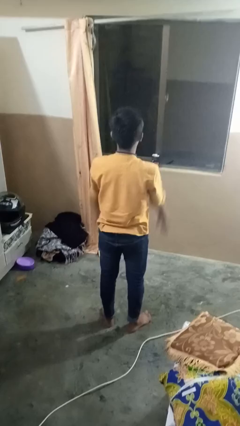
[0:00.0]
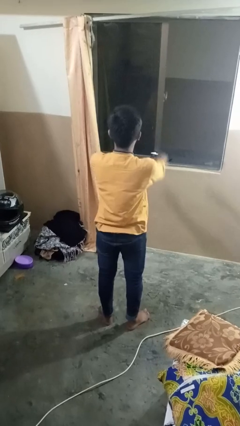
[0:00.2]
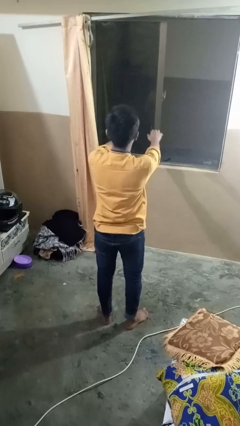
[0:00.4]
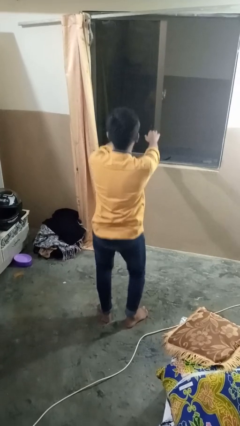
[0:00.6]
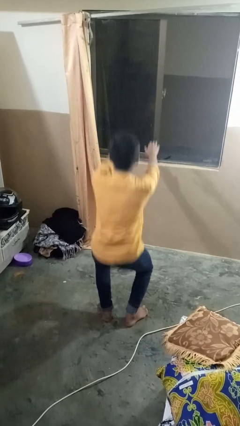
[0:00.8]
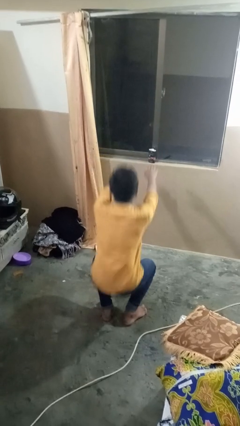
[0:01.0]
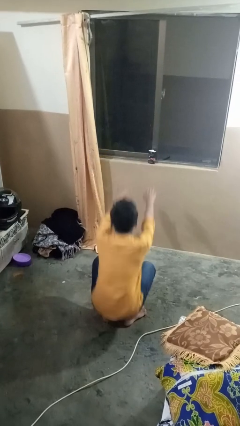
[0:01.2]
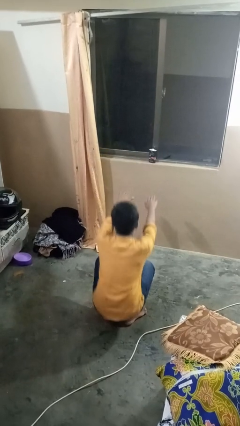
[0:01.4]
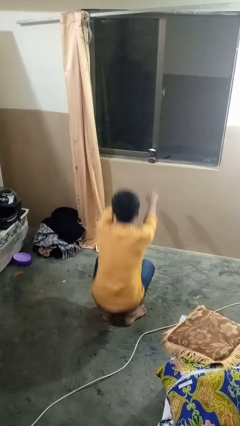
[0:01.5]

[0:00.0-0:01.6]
person squats

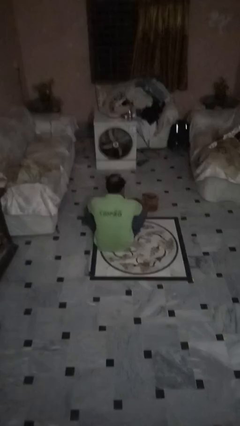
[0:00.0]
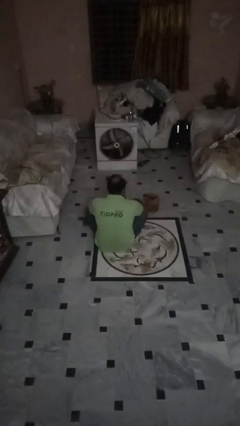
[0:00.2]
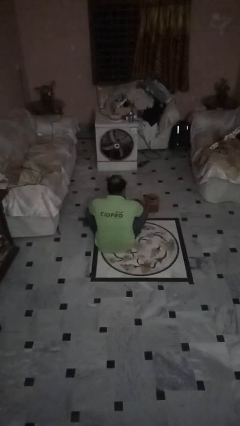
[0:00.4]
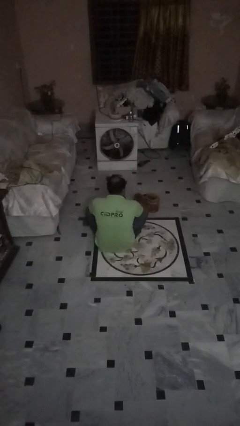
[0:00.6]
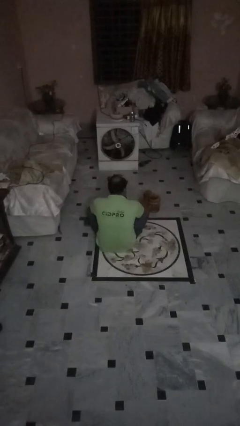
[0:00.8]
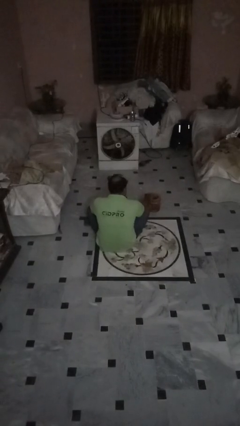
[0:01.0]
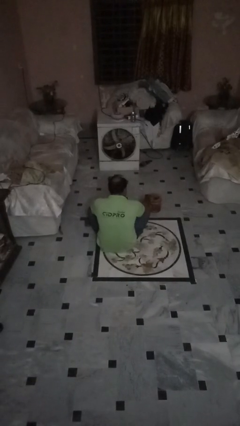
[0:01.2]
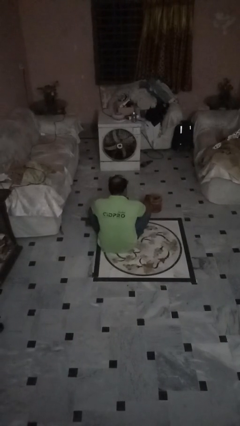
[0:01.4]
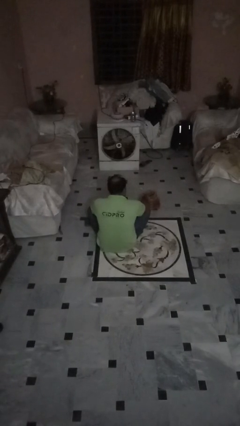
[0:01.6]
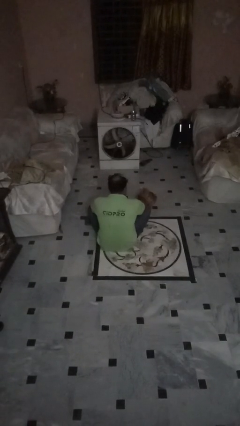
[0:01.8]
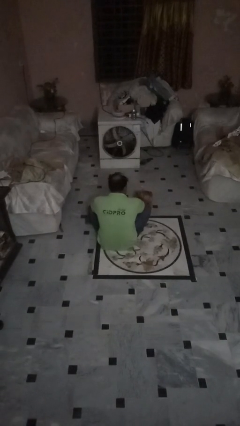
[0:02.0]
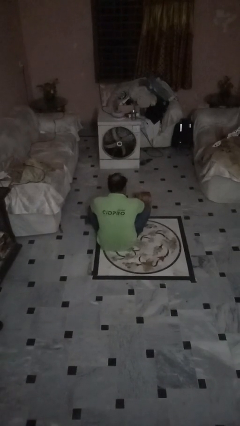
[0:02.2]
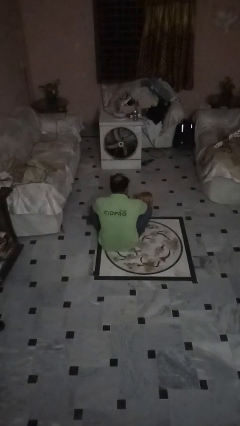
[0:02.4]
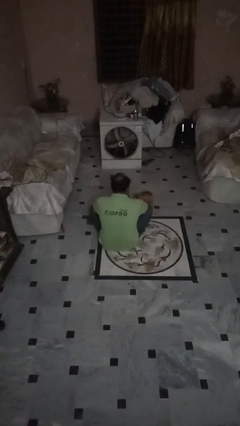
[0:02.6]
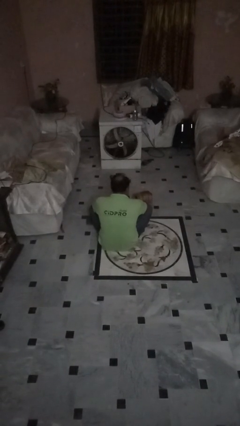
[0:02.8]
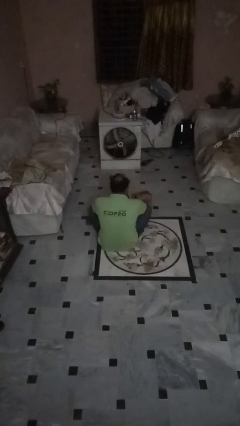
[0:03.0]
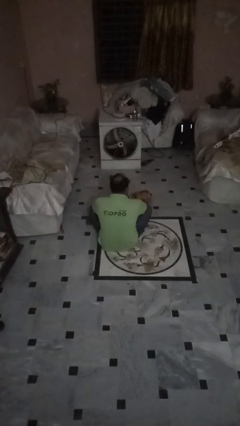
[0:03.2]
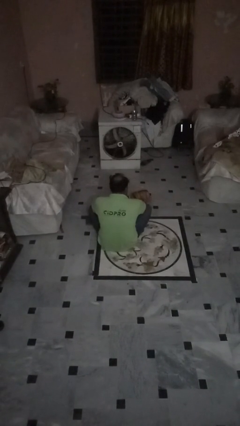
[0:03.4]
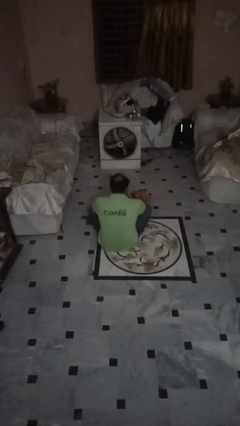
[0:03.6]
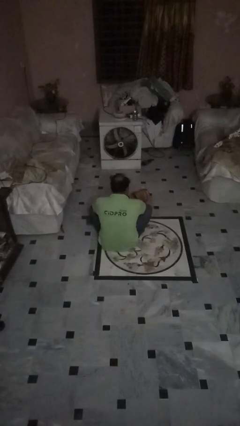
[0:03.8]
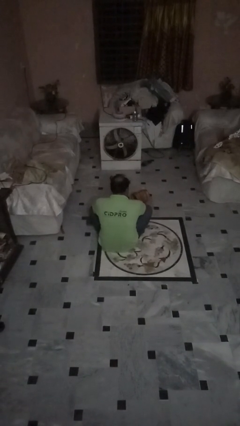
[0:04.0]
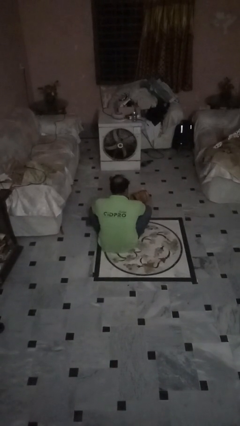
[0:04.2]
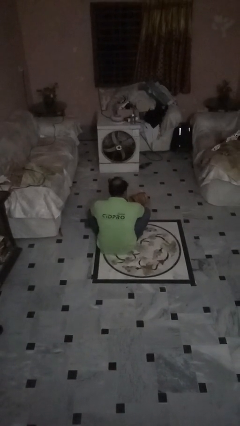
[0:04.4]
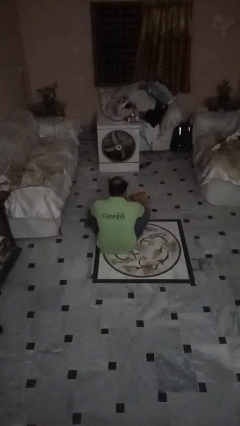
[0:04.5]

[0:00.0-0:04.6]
person knocks over furniture

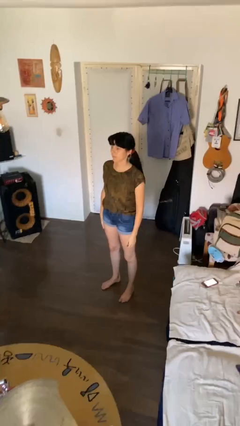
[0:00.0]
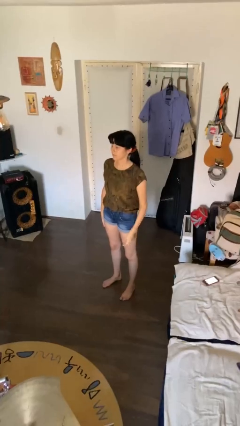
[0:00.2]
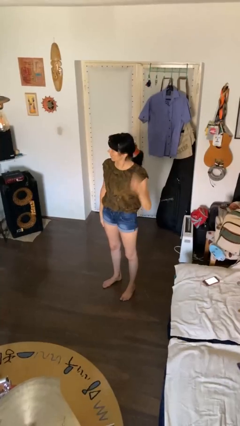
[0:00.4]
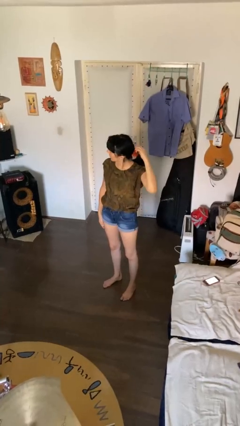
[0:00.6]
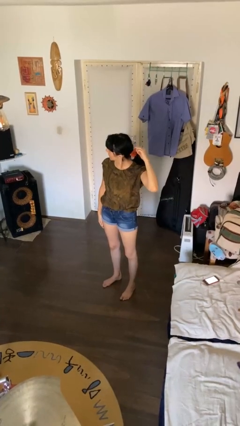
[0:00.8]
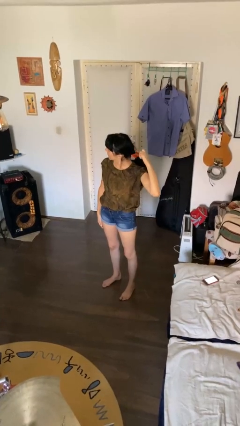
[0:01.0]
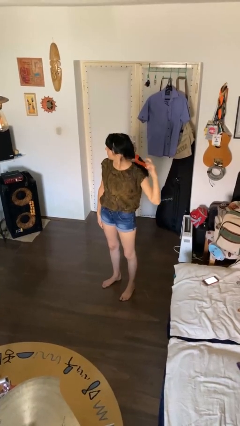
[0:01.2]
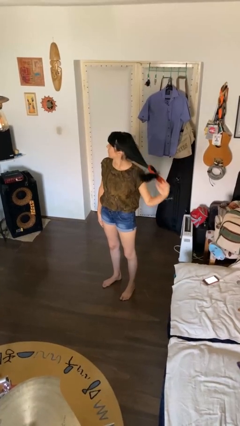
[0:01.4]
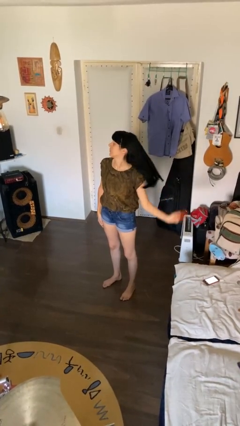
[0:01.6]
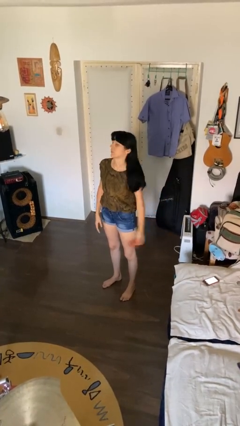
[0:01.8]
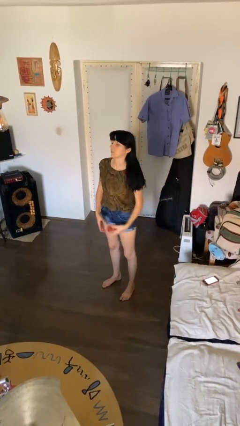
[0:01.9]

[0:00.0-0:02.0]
person takes off hairtie

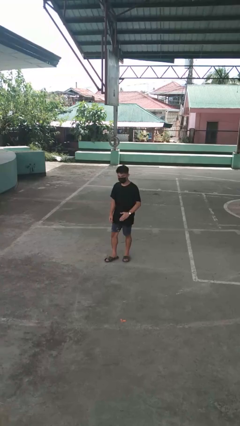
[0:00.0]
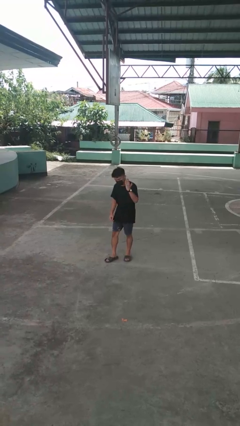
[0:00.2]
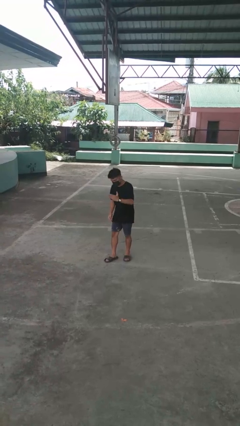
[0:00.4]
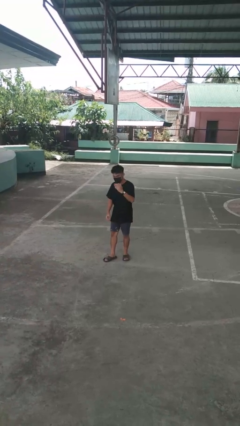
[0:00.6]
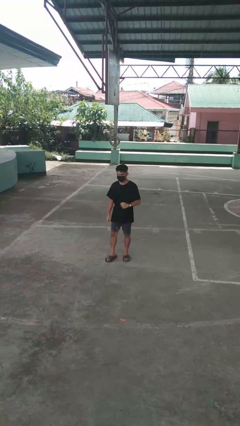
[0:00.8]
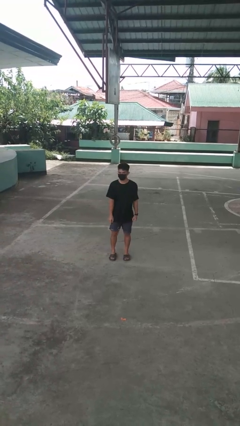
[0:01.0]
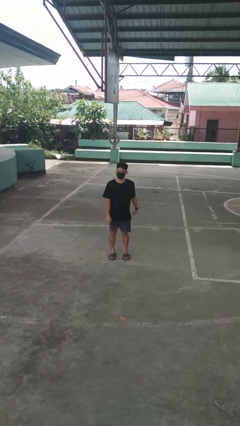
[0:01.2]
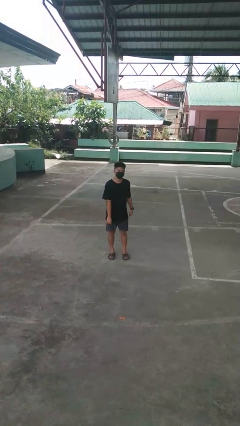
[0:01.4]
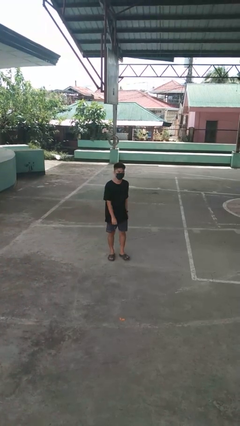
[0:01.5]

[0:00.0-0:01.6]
person karate chop

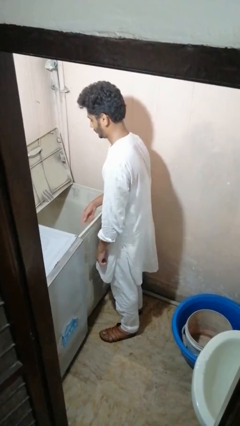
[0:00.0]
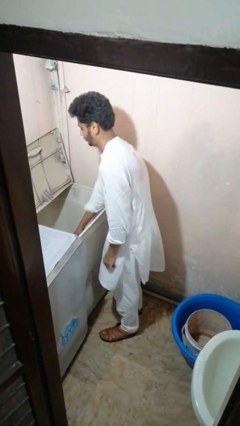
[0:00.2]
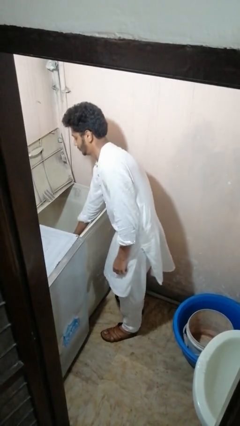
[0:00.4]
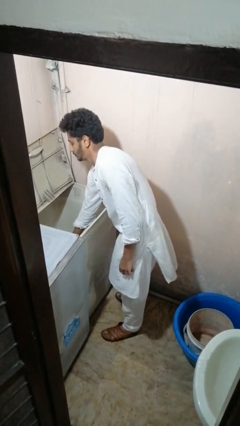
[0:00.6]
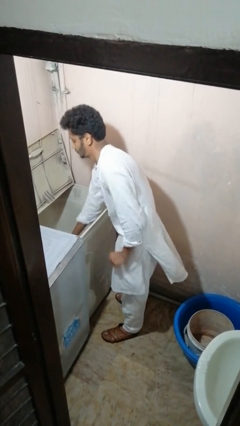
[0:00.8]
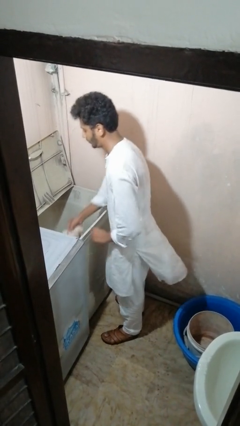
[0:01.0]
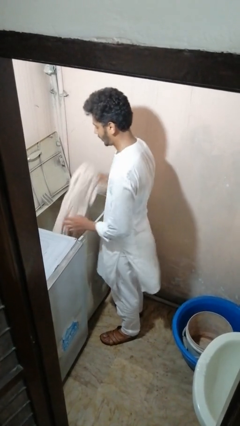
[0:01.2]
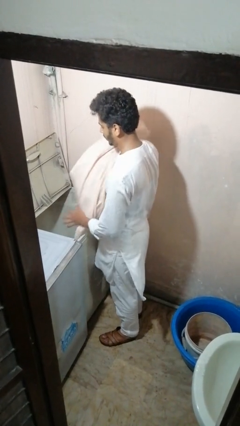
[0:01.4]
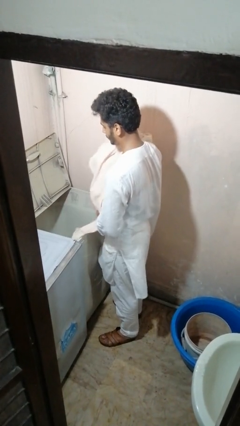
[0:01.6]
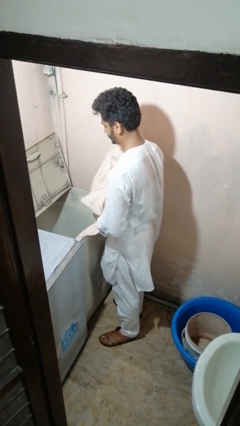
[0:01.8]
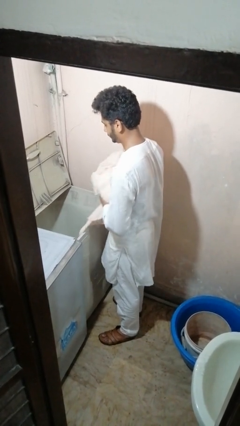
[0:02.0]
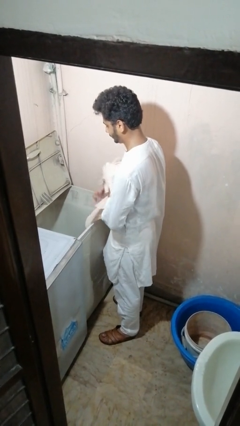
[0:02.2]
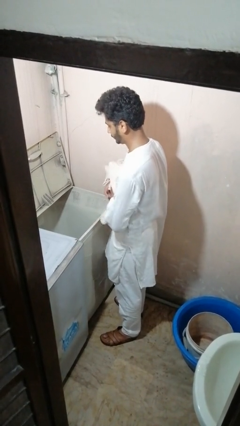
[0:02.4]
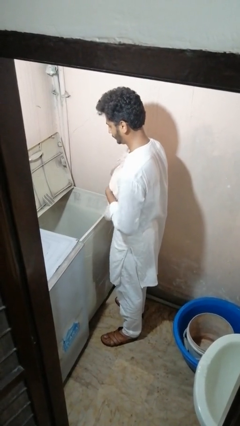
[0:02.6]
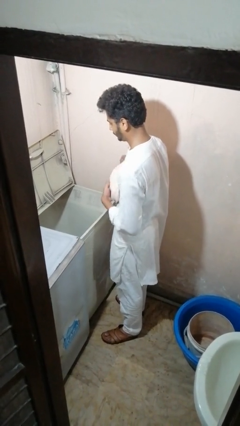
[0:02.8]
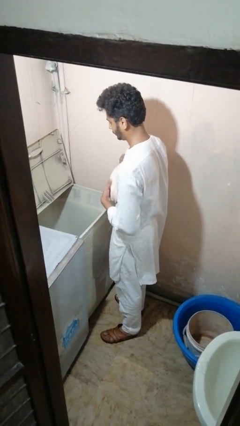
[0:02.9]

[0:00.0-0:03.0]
person unloads clotheswasher

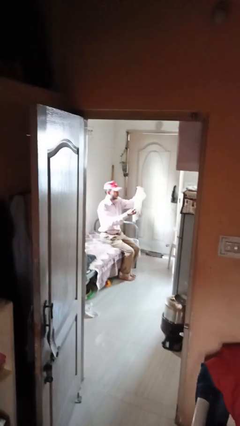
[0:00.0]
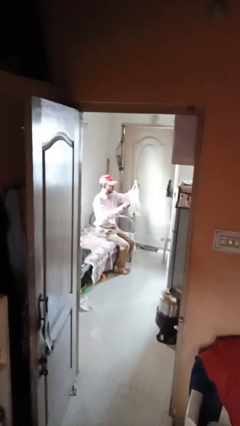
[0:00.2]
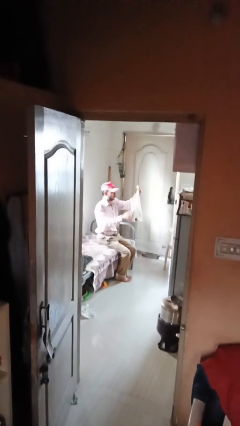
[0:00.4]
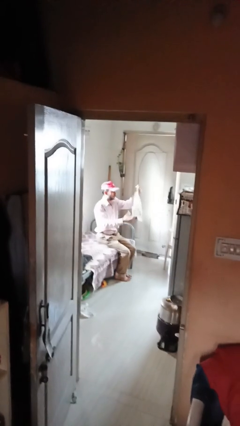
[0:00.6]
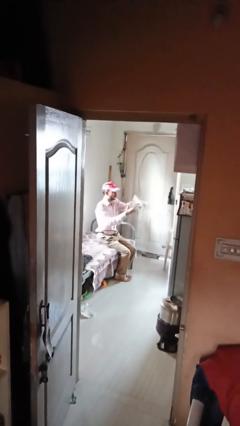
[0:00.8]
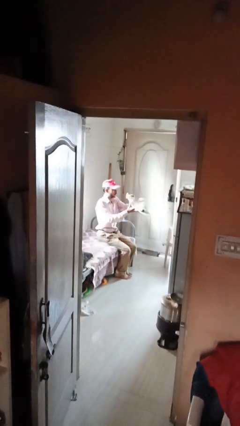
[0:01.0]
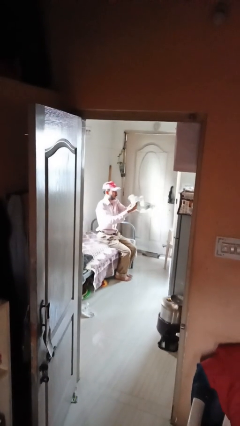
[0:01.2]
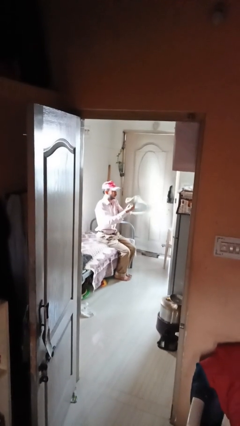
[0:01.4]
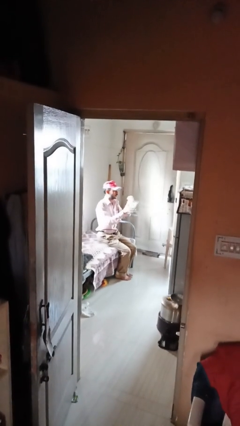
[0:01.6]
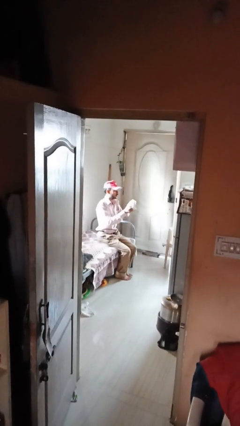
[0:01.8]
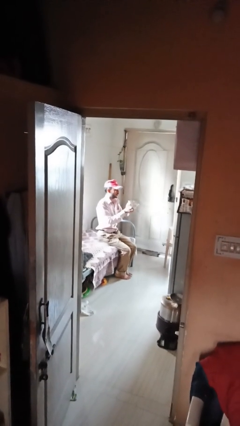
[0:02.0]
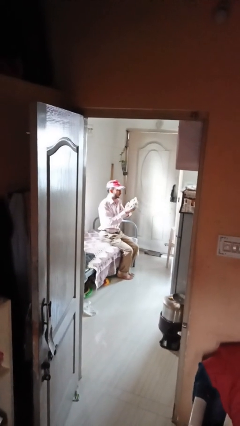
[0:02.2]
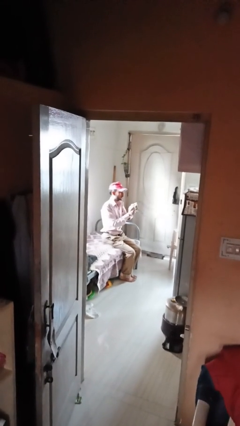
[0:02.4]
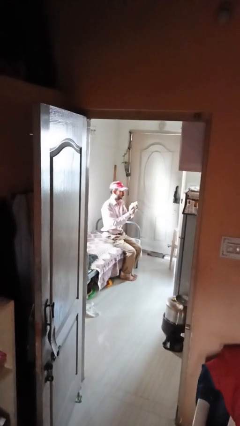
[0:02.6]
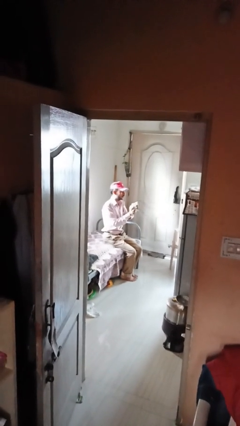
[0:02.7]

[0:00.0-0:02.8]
person crumples paper

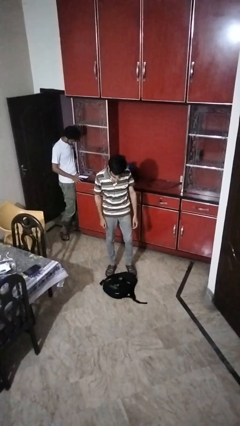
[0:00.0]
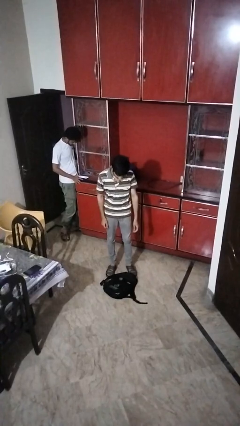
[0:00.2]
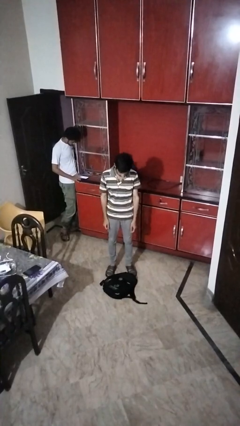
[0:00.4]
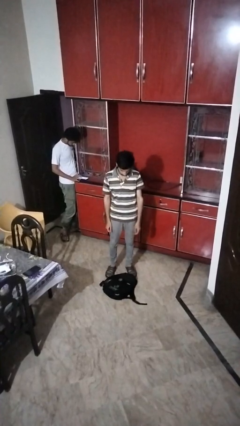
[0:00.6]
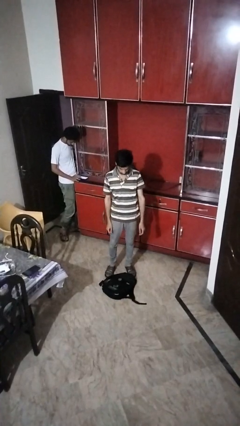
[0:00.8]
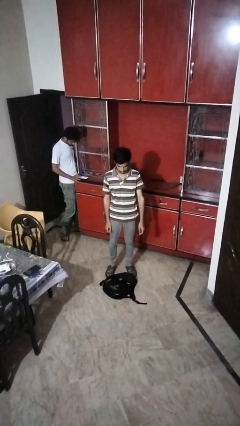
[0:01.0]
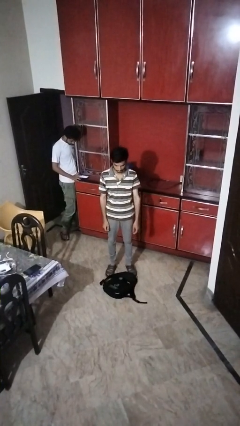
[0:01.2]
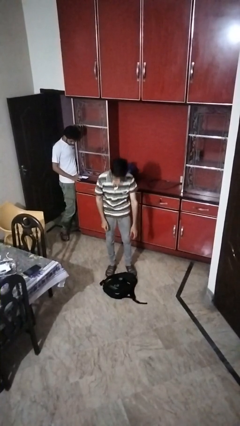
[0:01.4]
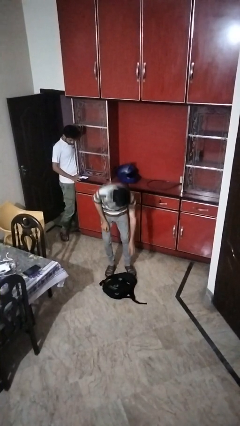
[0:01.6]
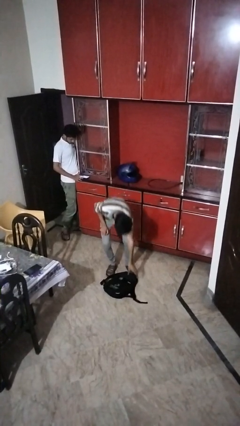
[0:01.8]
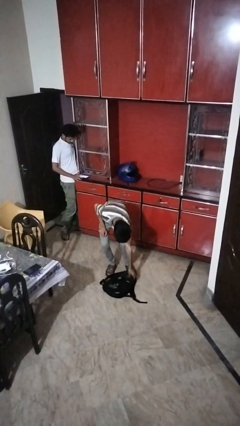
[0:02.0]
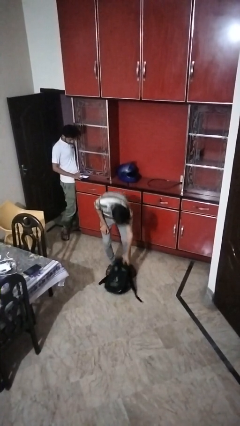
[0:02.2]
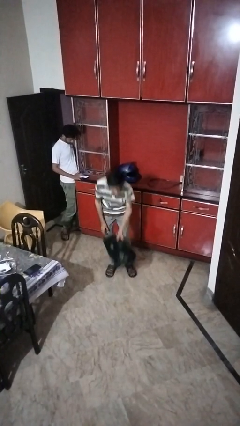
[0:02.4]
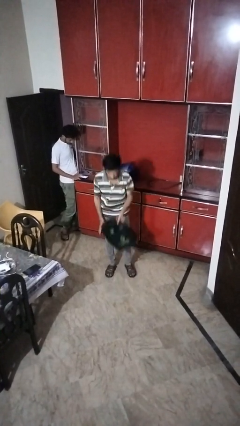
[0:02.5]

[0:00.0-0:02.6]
person picks up object from floor
